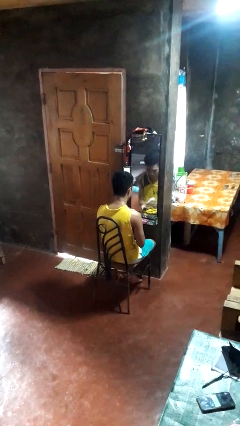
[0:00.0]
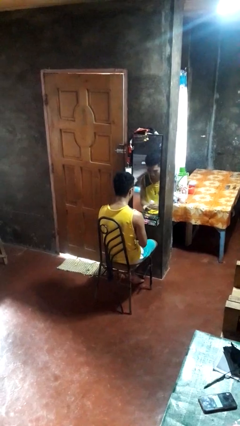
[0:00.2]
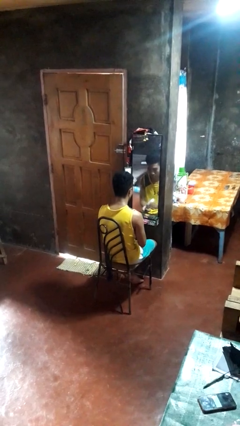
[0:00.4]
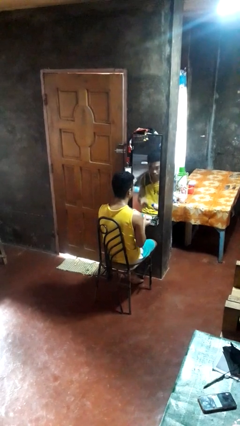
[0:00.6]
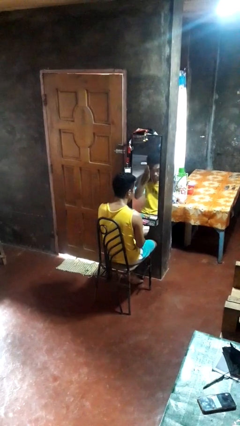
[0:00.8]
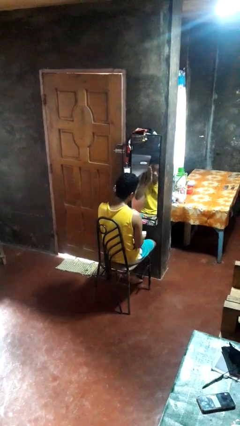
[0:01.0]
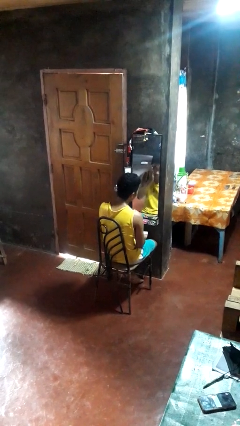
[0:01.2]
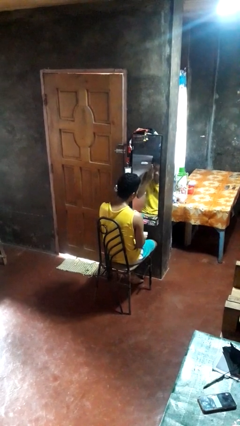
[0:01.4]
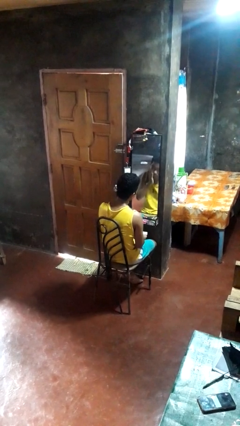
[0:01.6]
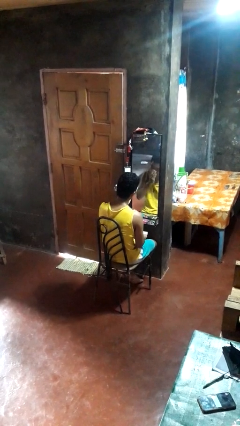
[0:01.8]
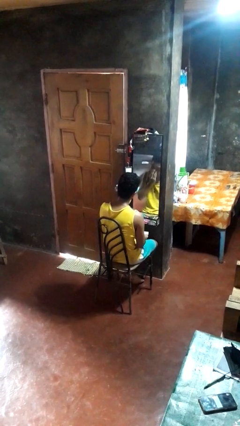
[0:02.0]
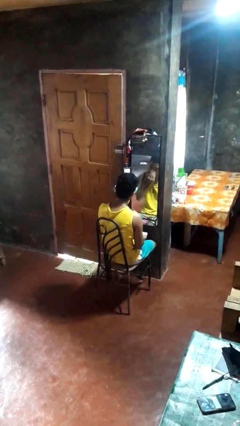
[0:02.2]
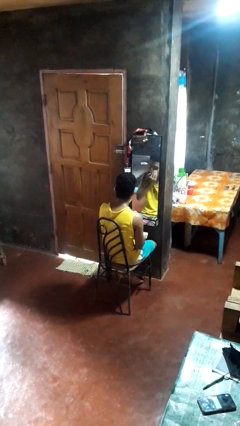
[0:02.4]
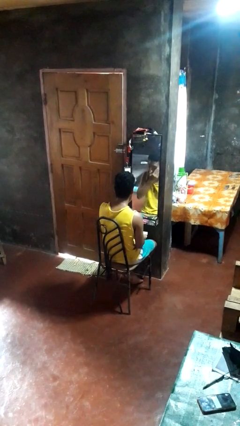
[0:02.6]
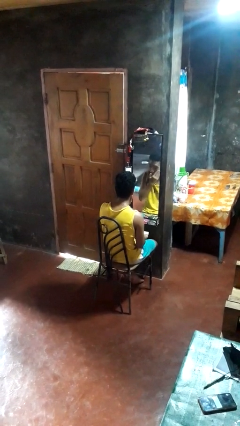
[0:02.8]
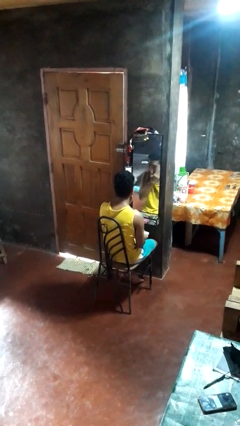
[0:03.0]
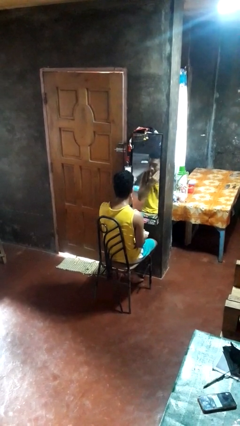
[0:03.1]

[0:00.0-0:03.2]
person applies foundation makeup

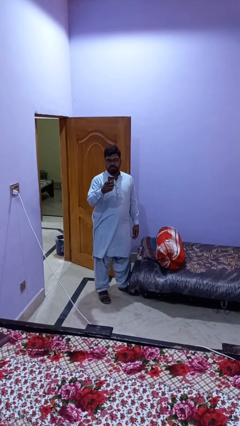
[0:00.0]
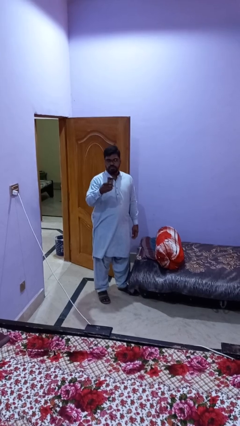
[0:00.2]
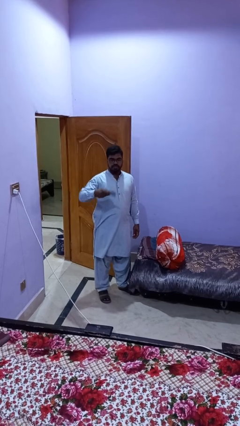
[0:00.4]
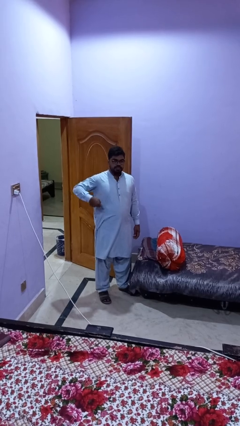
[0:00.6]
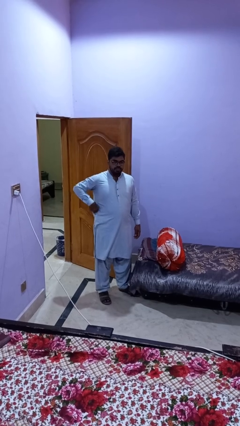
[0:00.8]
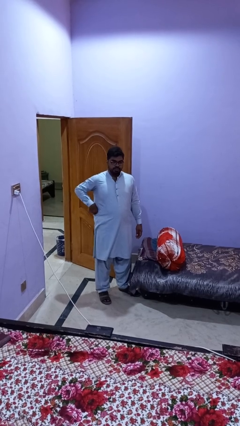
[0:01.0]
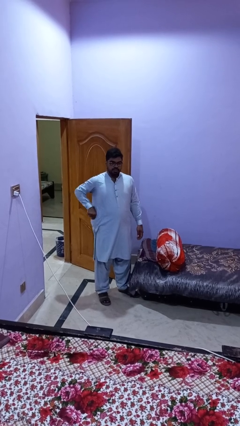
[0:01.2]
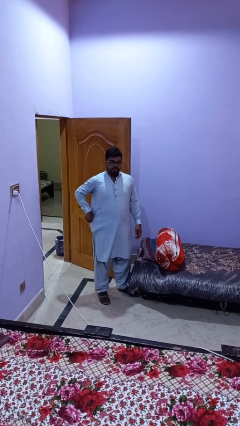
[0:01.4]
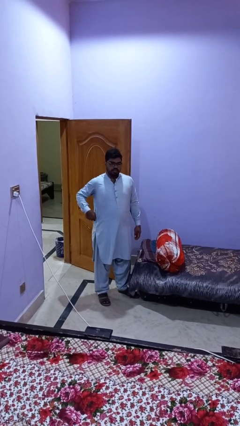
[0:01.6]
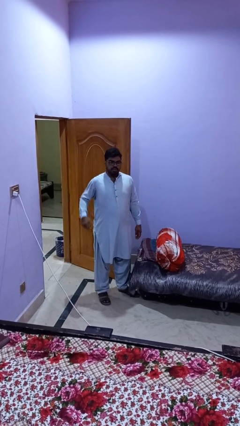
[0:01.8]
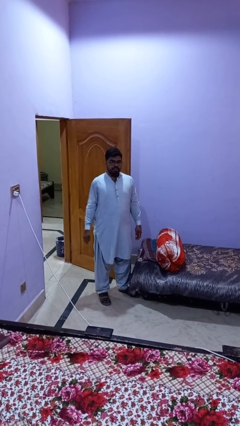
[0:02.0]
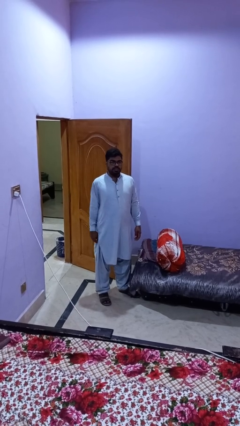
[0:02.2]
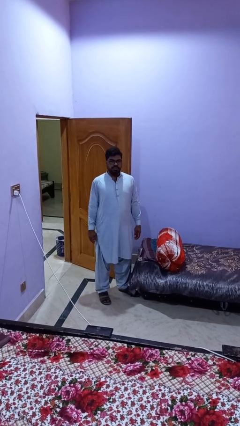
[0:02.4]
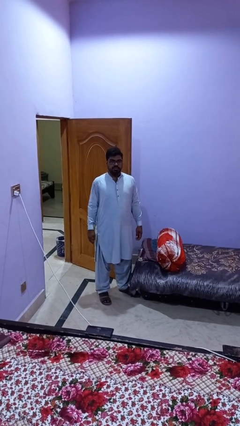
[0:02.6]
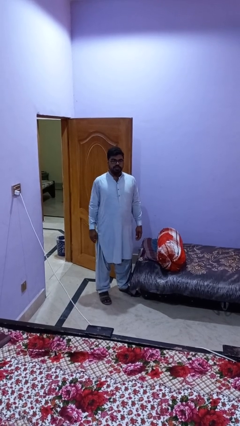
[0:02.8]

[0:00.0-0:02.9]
person puts phone into pocket

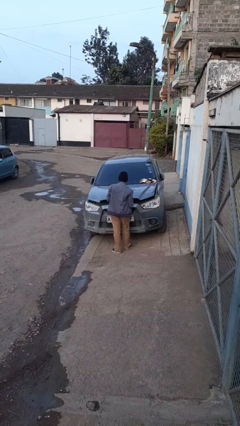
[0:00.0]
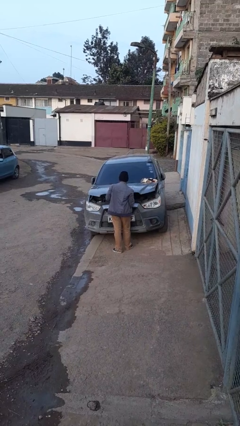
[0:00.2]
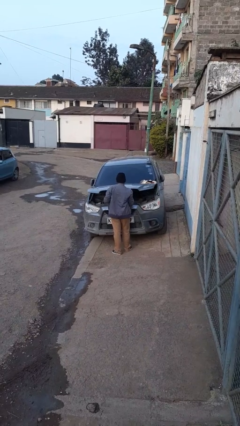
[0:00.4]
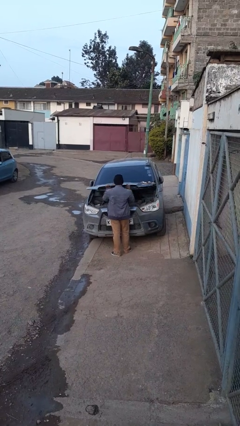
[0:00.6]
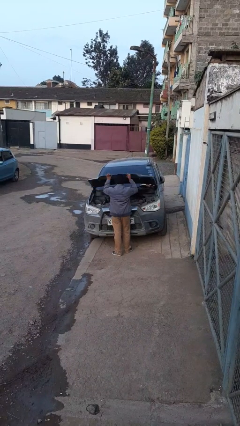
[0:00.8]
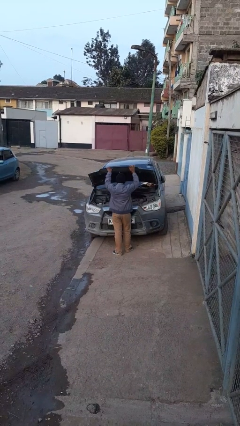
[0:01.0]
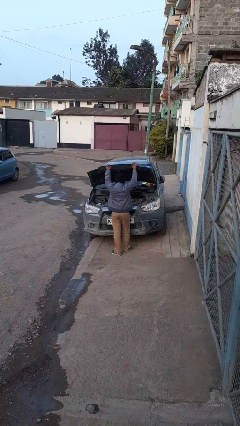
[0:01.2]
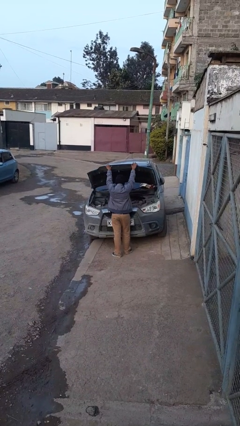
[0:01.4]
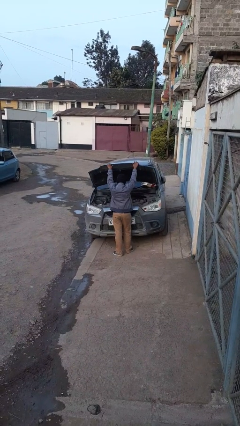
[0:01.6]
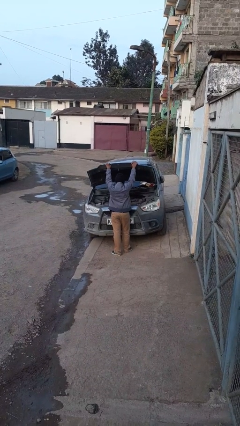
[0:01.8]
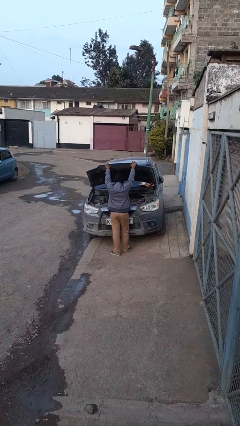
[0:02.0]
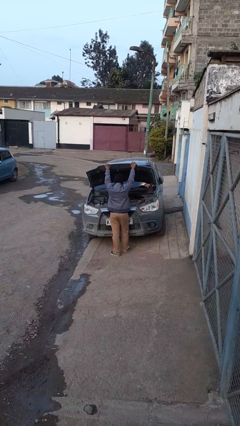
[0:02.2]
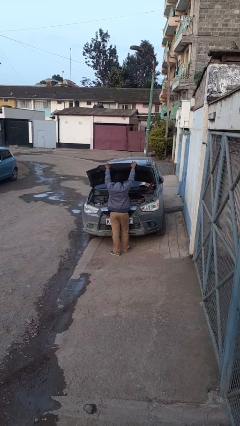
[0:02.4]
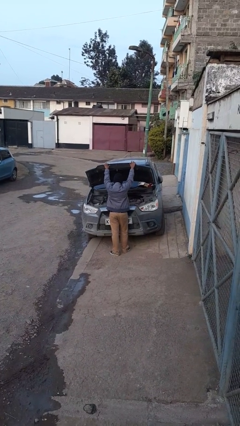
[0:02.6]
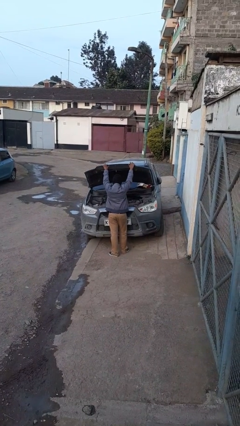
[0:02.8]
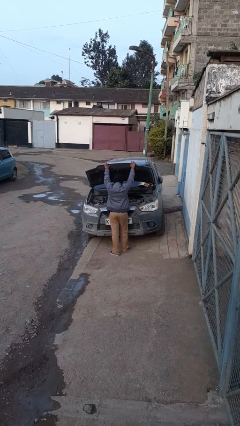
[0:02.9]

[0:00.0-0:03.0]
person opens car hood

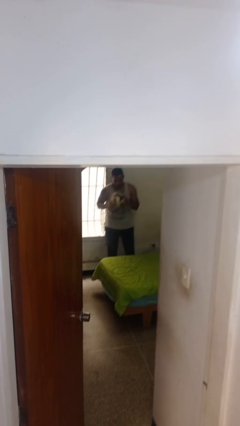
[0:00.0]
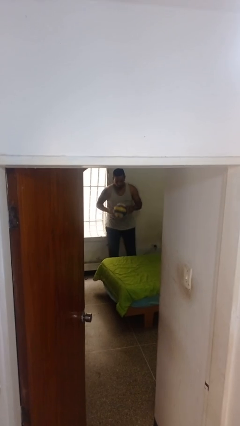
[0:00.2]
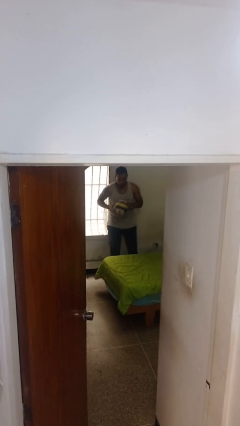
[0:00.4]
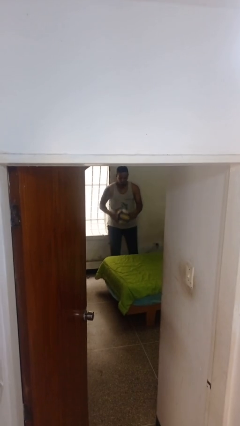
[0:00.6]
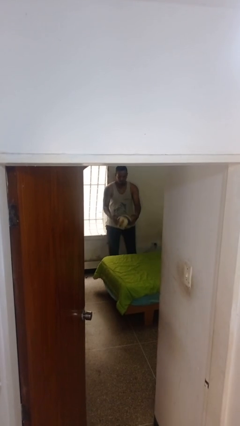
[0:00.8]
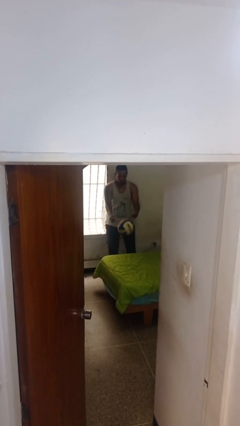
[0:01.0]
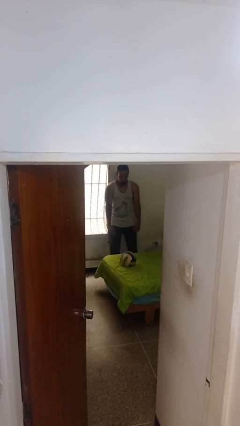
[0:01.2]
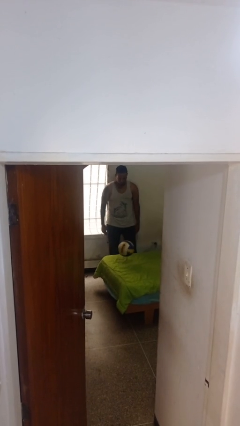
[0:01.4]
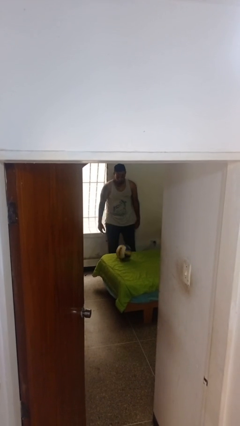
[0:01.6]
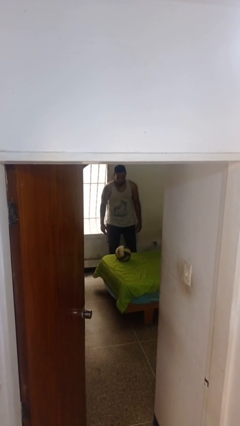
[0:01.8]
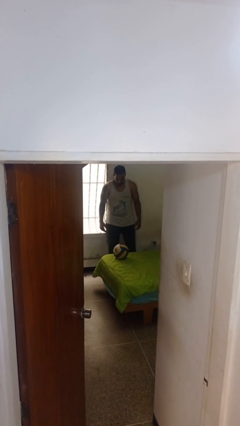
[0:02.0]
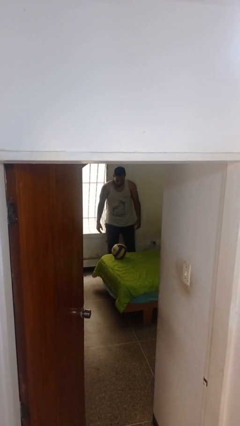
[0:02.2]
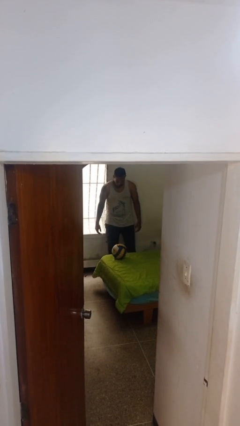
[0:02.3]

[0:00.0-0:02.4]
person throws object on bed

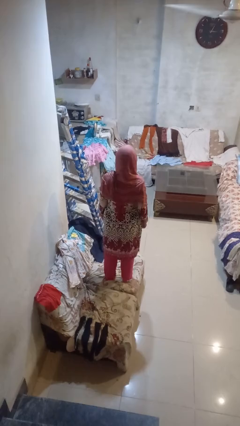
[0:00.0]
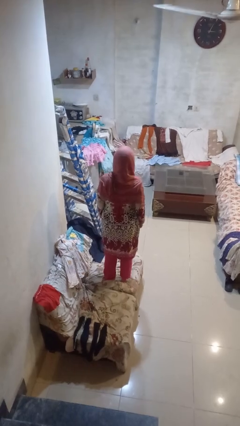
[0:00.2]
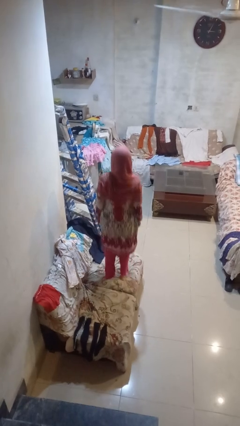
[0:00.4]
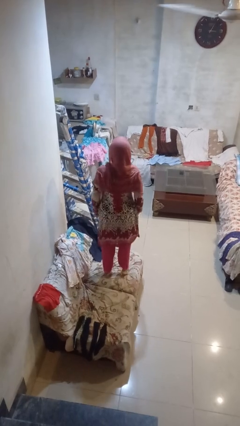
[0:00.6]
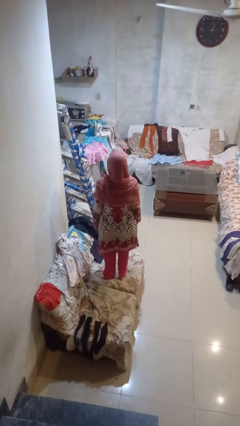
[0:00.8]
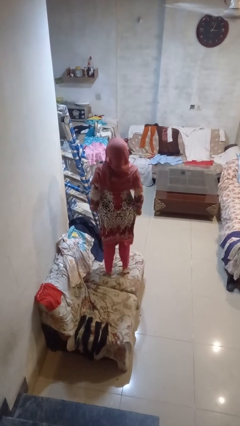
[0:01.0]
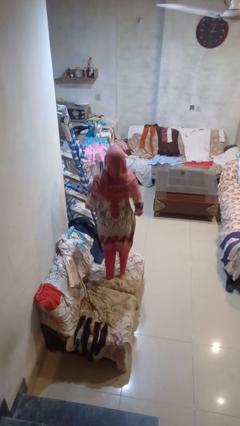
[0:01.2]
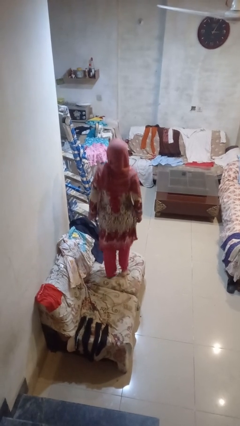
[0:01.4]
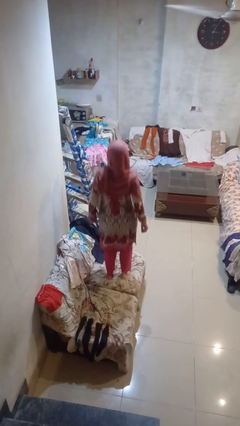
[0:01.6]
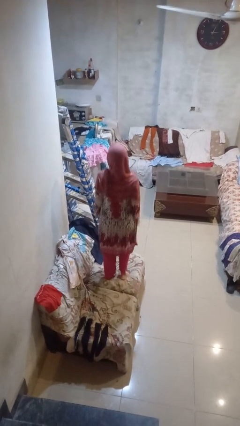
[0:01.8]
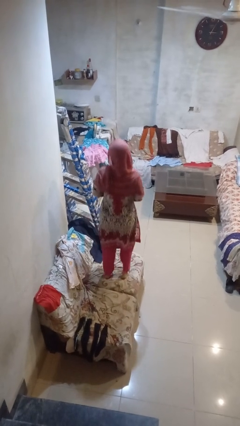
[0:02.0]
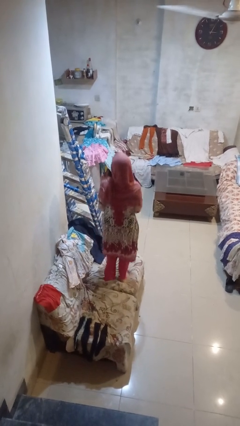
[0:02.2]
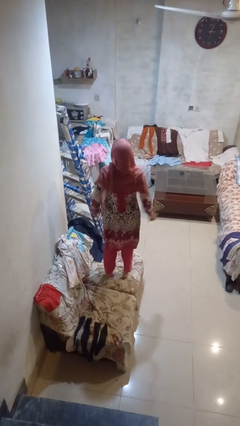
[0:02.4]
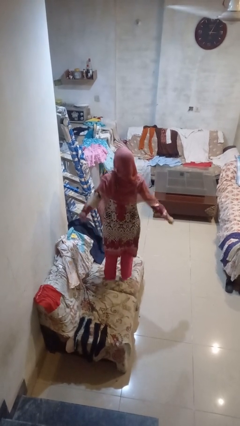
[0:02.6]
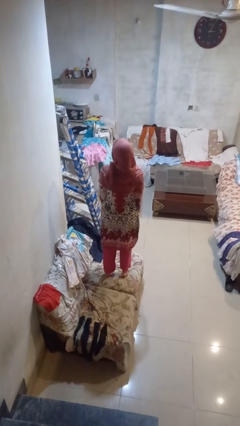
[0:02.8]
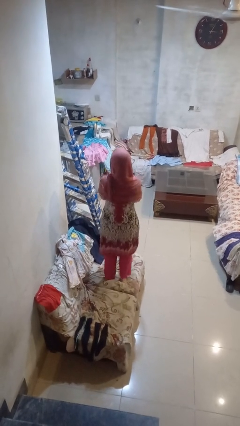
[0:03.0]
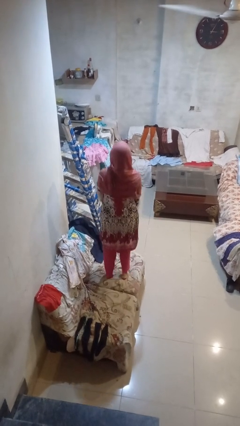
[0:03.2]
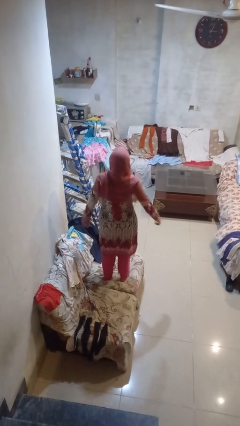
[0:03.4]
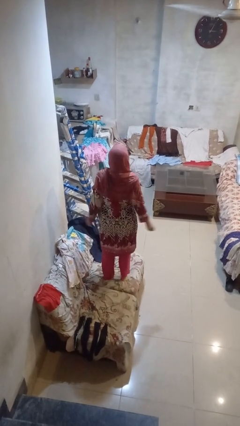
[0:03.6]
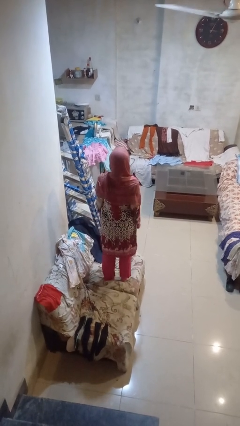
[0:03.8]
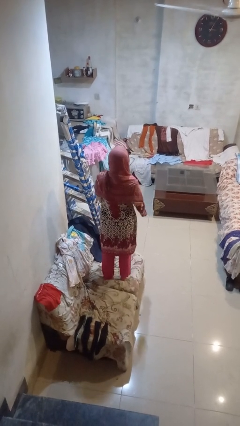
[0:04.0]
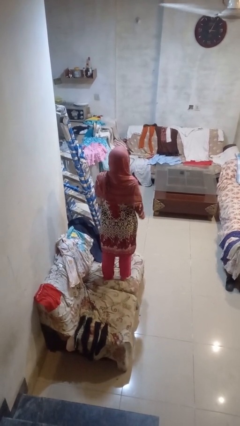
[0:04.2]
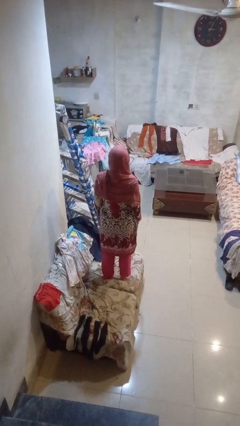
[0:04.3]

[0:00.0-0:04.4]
person jumps on couch

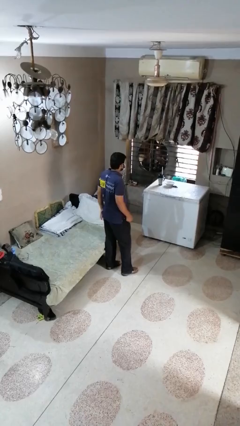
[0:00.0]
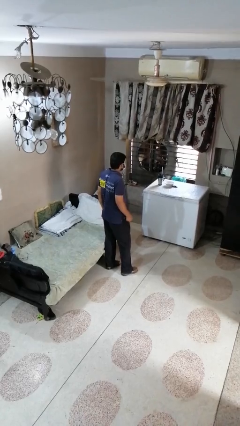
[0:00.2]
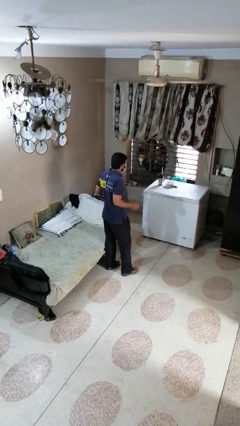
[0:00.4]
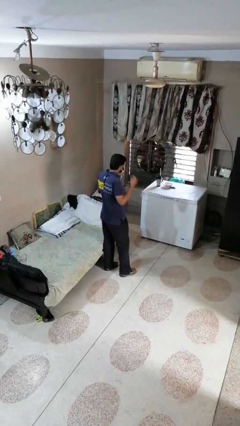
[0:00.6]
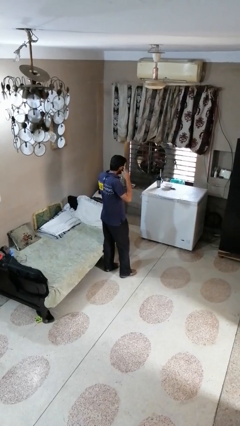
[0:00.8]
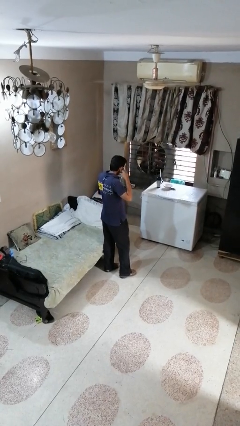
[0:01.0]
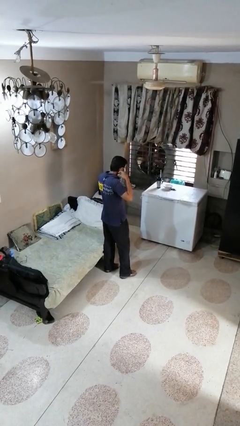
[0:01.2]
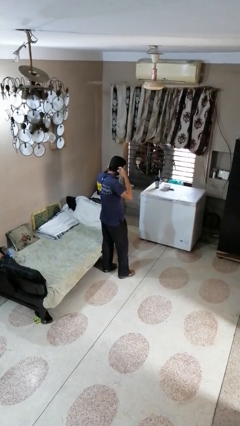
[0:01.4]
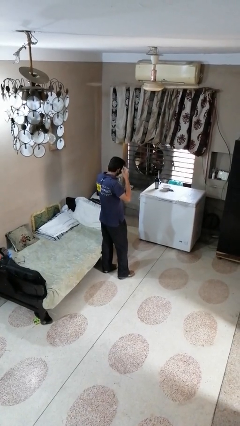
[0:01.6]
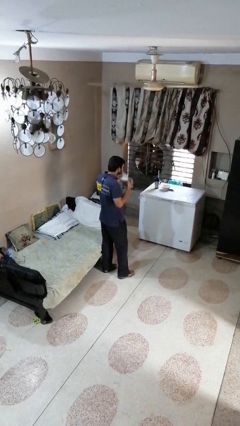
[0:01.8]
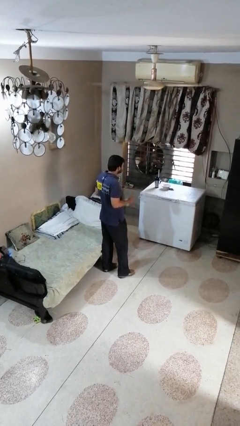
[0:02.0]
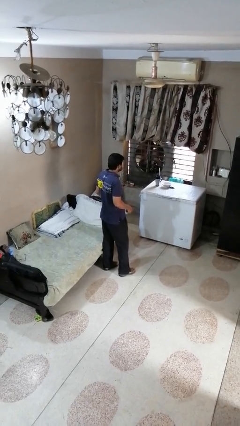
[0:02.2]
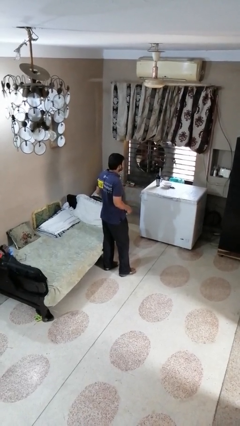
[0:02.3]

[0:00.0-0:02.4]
person takes off facemask
